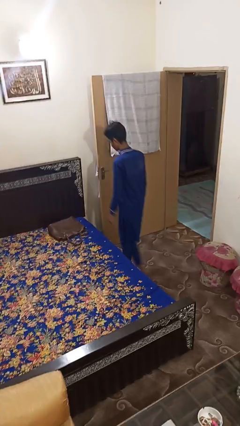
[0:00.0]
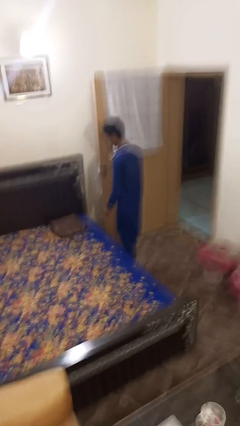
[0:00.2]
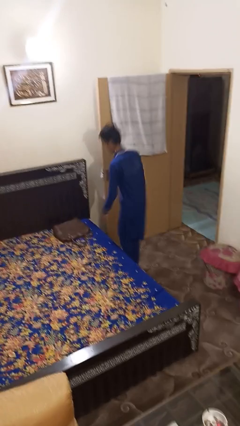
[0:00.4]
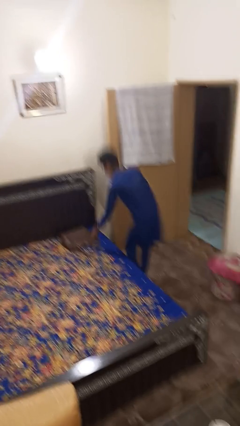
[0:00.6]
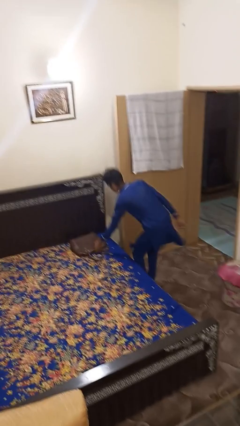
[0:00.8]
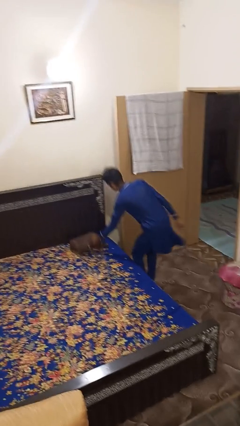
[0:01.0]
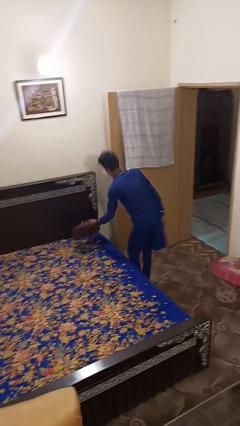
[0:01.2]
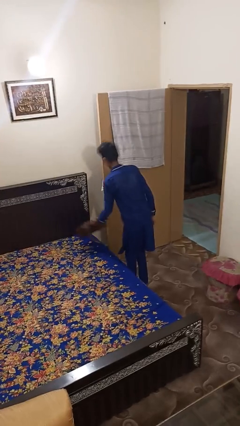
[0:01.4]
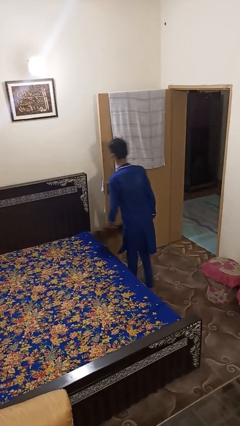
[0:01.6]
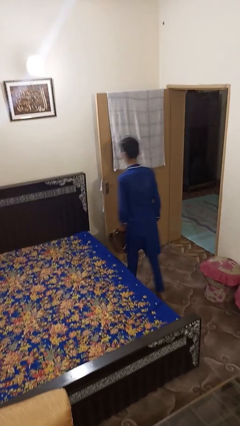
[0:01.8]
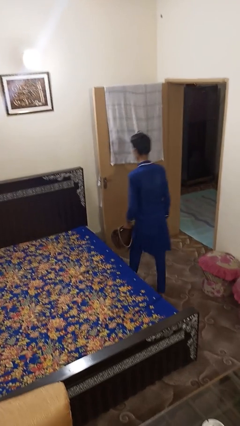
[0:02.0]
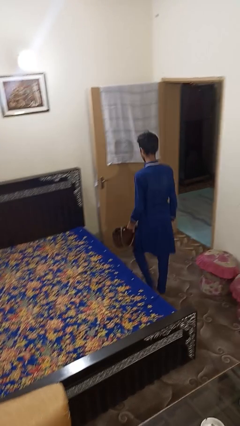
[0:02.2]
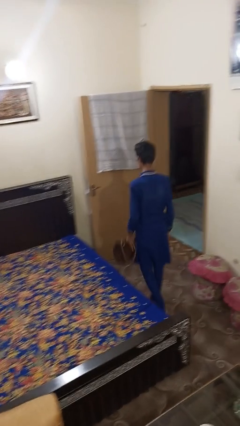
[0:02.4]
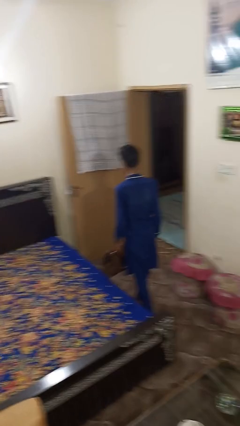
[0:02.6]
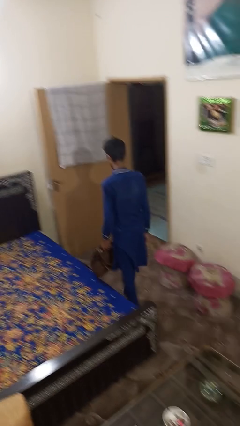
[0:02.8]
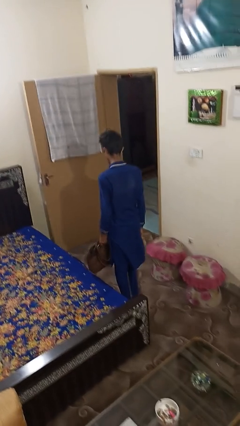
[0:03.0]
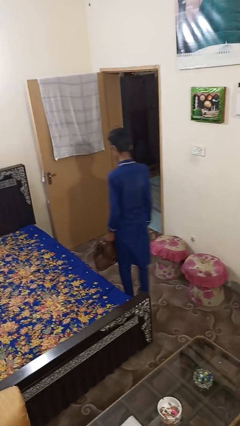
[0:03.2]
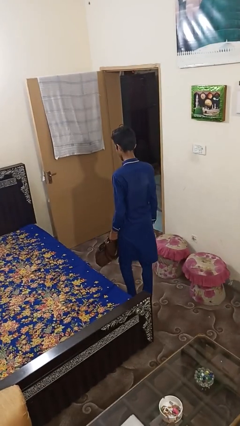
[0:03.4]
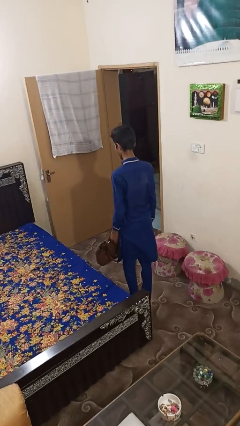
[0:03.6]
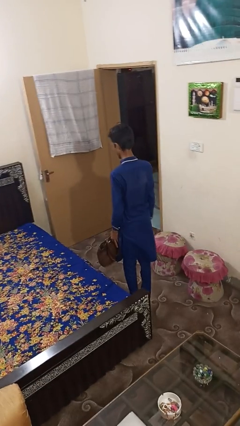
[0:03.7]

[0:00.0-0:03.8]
person picks up object from bed

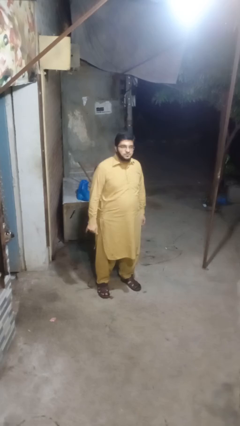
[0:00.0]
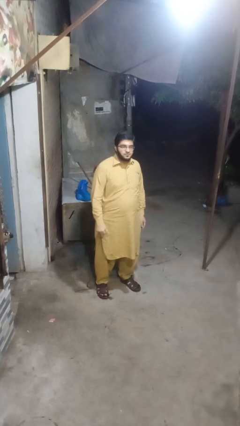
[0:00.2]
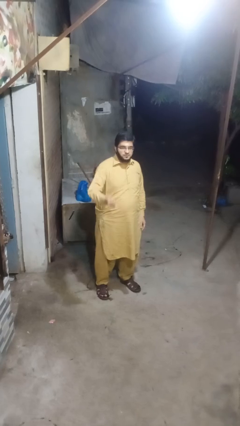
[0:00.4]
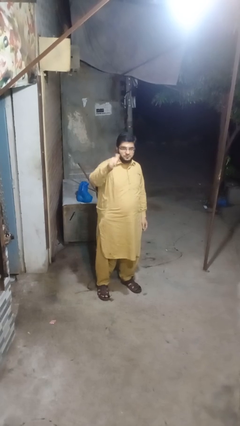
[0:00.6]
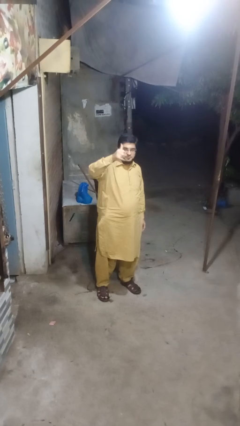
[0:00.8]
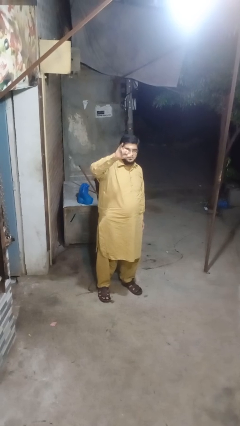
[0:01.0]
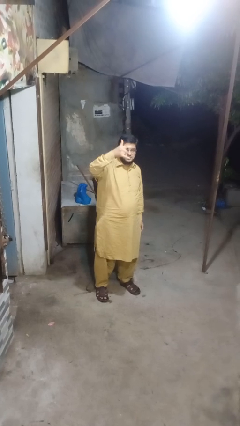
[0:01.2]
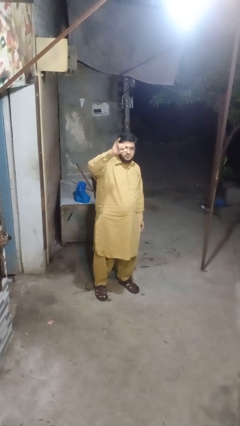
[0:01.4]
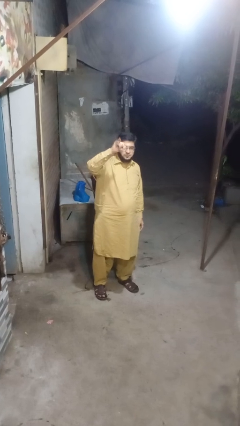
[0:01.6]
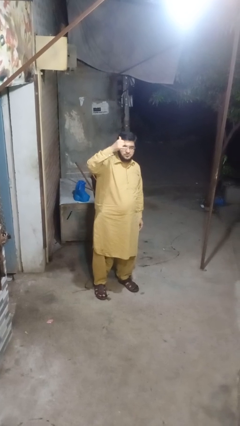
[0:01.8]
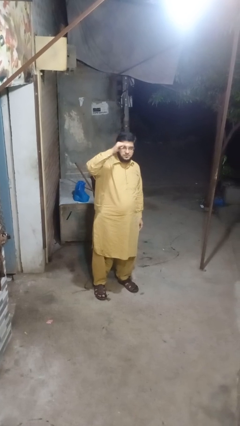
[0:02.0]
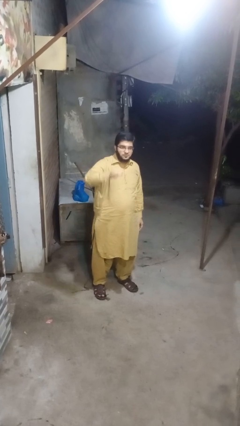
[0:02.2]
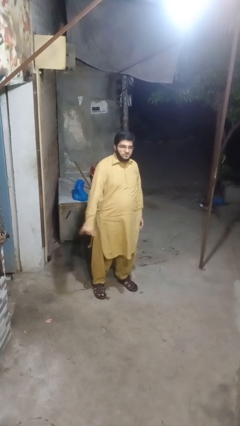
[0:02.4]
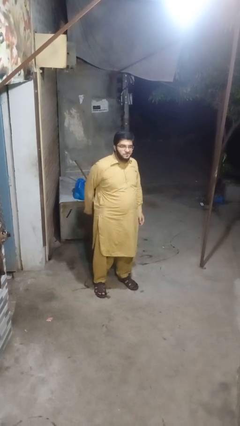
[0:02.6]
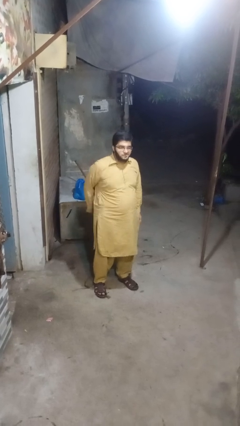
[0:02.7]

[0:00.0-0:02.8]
person gestures hang loose

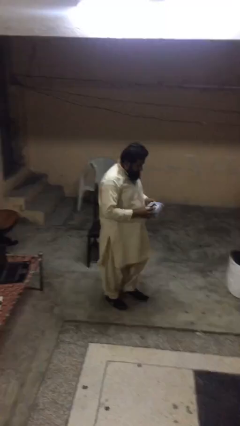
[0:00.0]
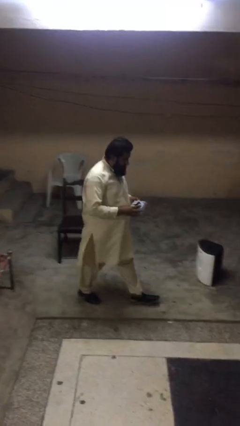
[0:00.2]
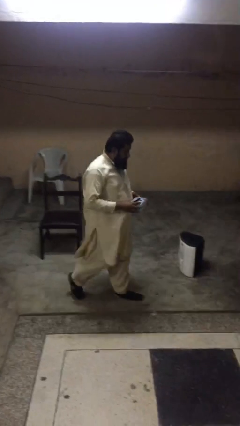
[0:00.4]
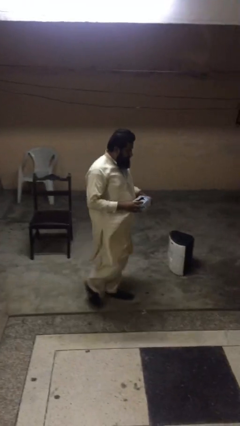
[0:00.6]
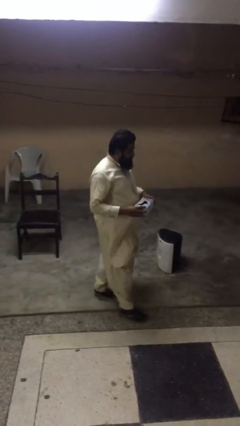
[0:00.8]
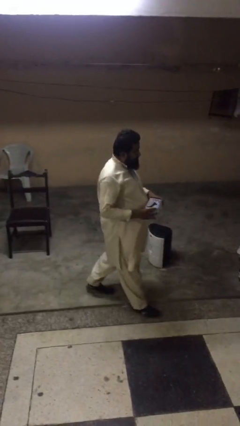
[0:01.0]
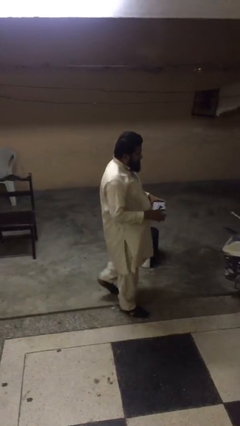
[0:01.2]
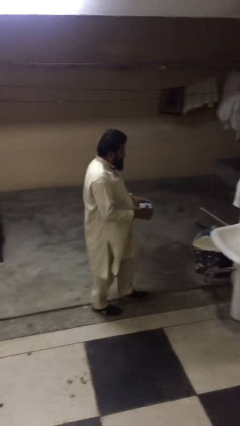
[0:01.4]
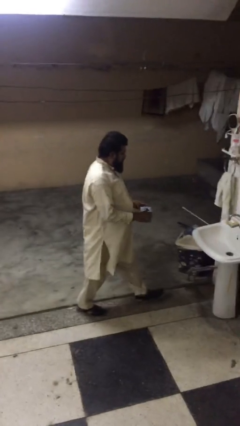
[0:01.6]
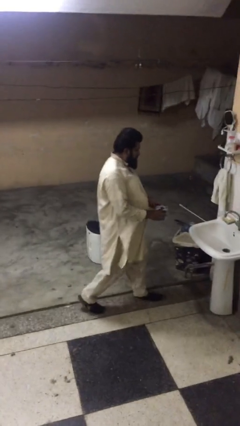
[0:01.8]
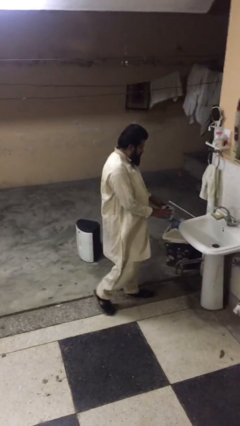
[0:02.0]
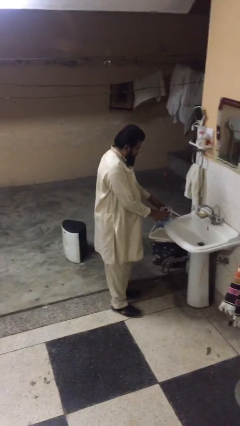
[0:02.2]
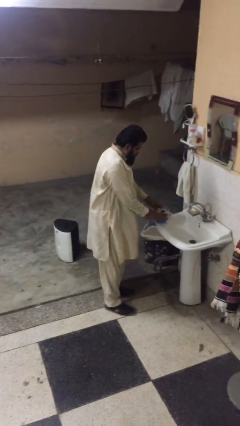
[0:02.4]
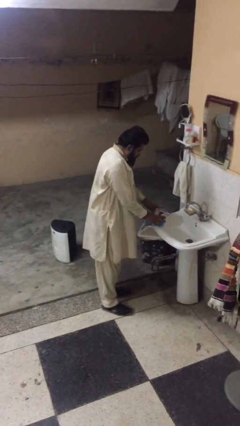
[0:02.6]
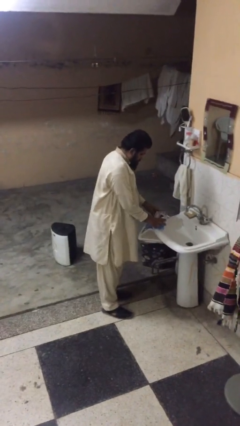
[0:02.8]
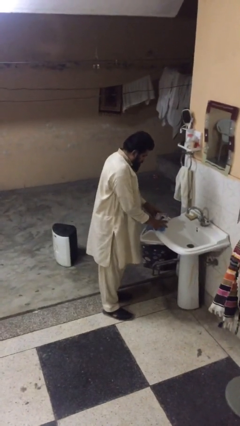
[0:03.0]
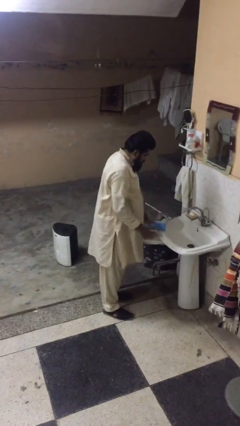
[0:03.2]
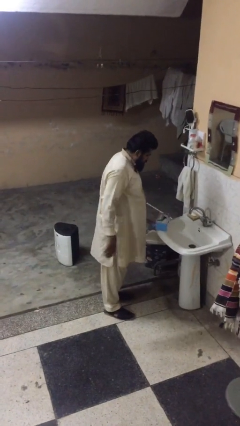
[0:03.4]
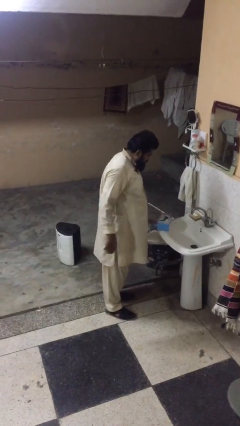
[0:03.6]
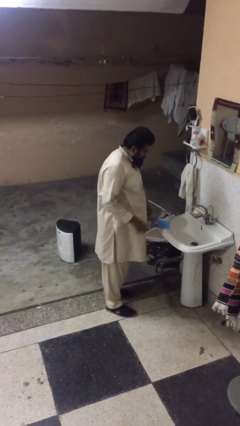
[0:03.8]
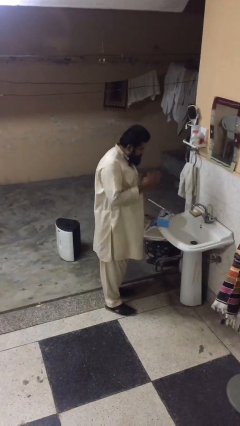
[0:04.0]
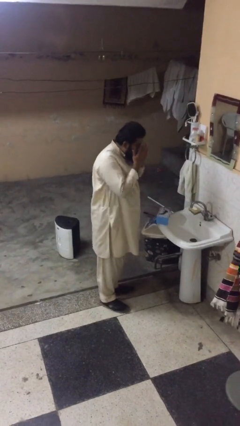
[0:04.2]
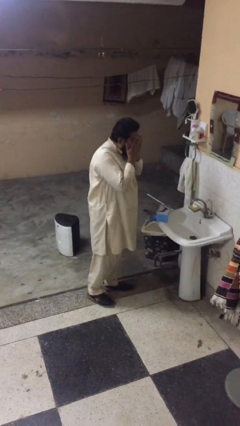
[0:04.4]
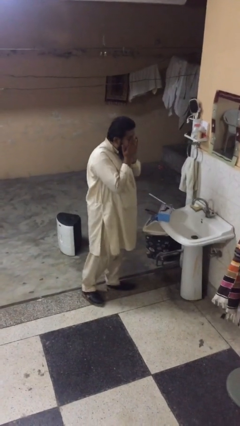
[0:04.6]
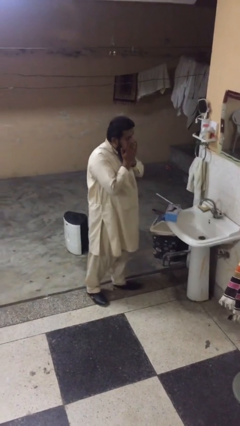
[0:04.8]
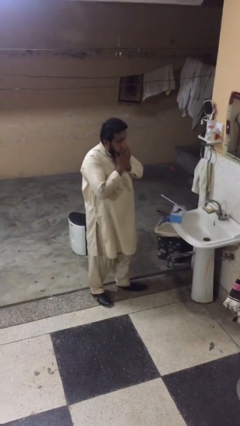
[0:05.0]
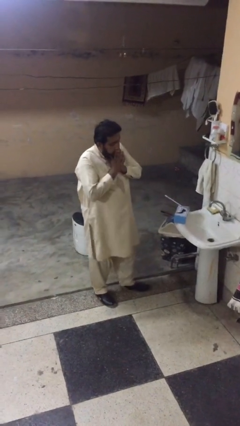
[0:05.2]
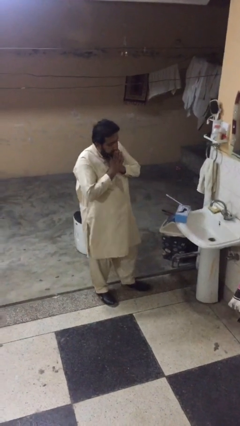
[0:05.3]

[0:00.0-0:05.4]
person puts down object on table

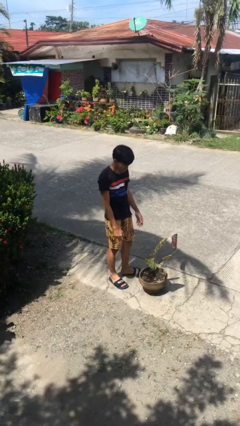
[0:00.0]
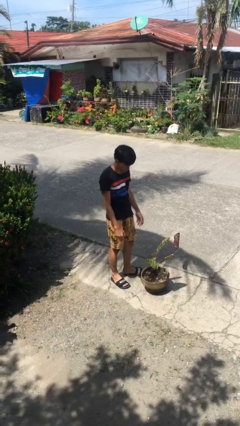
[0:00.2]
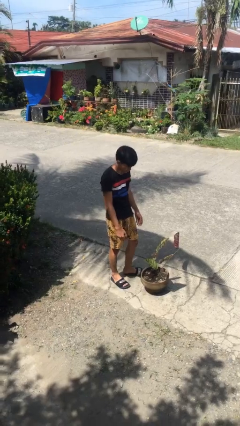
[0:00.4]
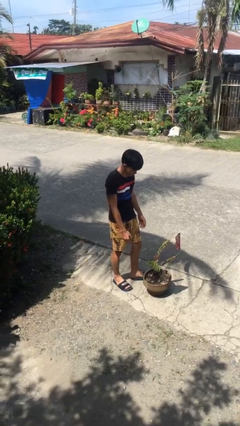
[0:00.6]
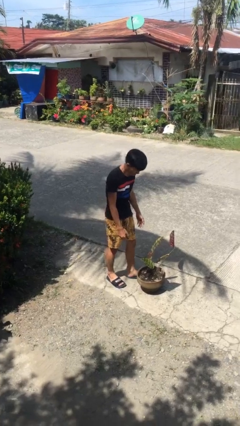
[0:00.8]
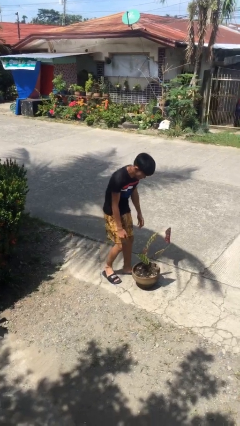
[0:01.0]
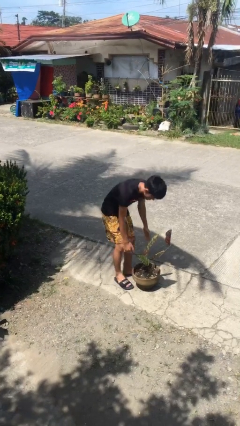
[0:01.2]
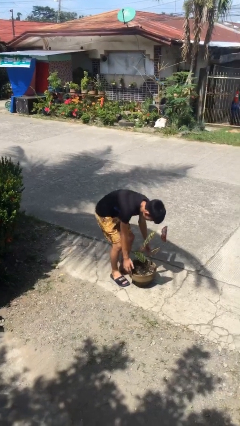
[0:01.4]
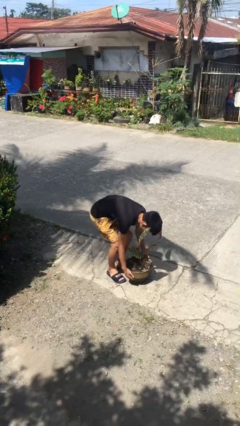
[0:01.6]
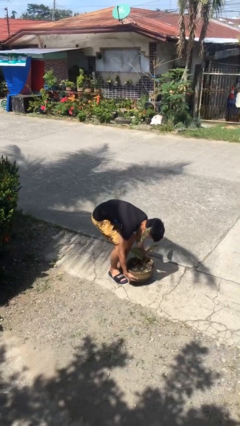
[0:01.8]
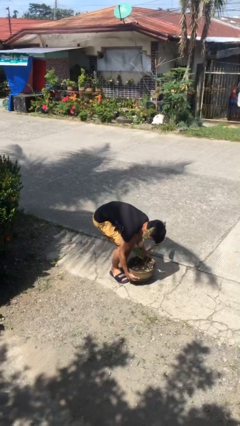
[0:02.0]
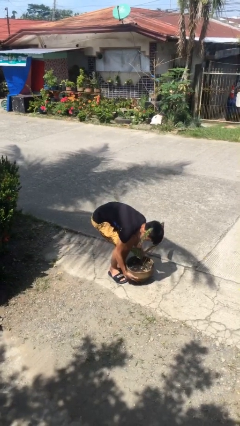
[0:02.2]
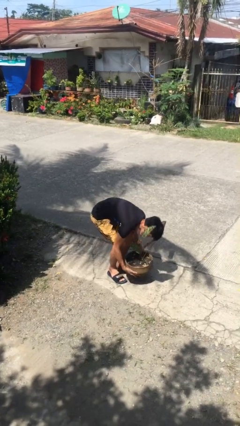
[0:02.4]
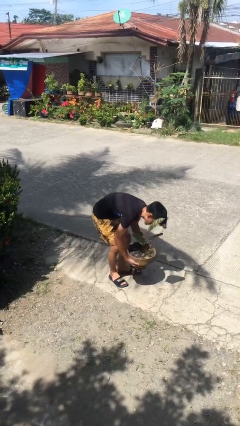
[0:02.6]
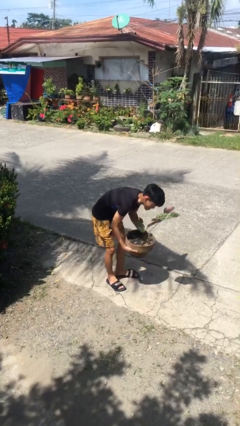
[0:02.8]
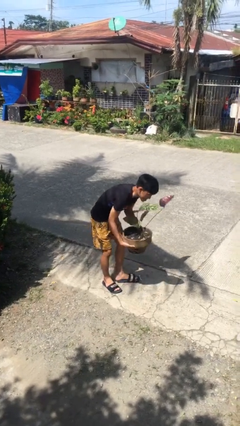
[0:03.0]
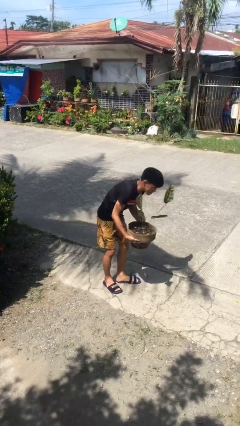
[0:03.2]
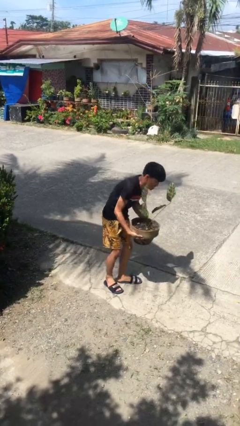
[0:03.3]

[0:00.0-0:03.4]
person picks up object from floor

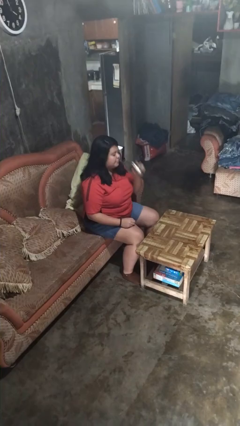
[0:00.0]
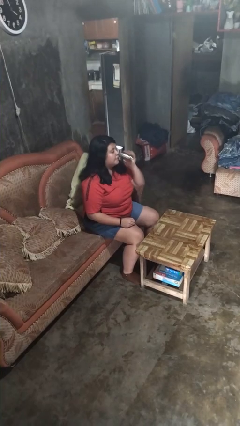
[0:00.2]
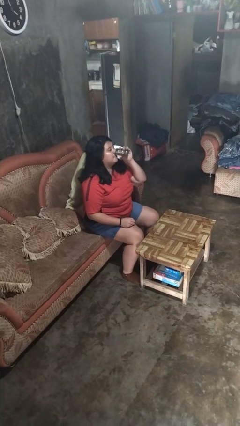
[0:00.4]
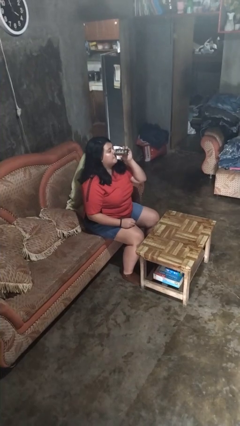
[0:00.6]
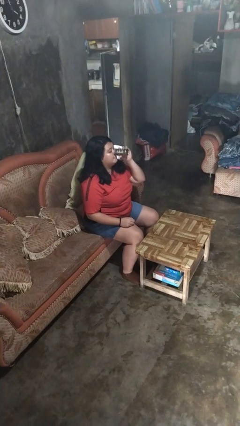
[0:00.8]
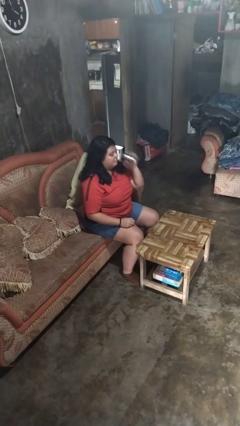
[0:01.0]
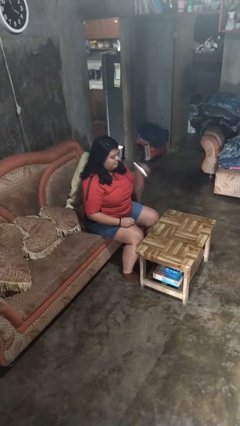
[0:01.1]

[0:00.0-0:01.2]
person drinks from beverage can

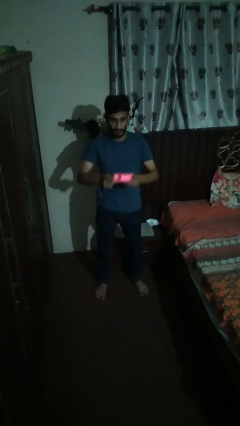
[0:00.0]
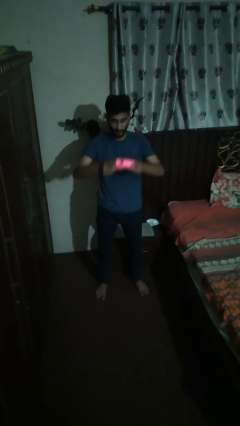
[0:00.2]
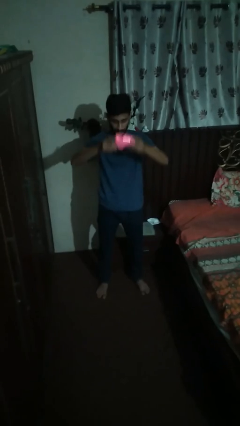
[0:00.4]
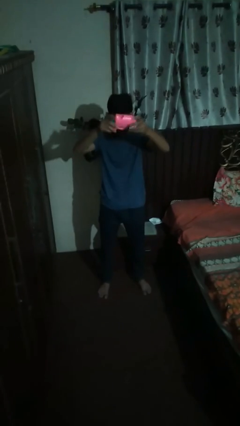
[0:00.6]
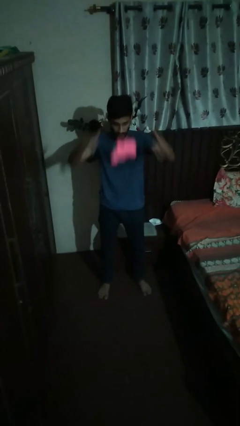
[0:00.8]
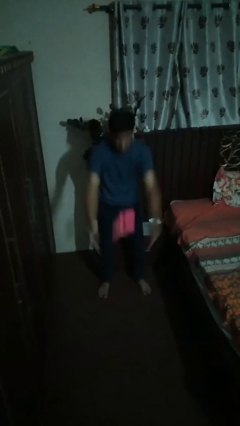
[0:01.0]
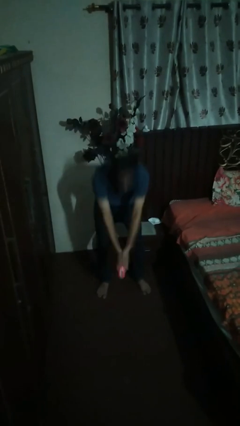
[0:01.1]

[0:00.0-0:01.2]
person drops object
